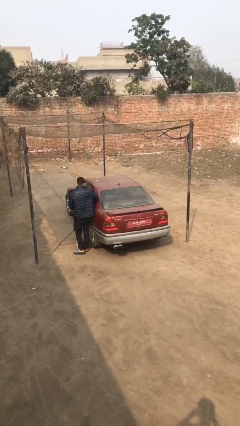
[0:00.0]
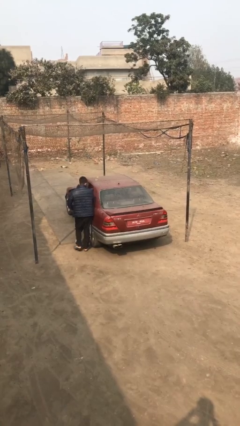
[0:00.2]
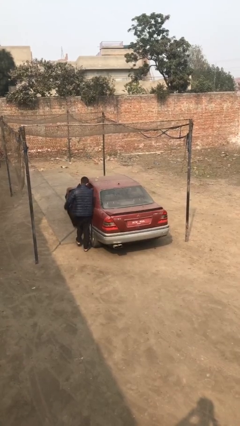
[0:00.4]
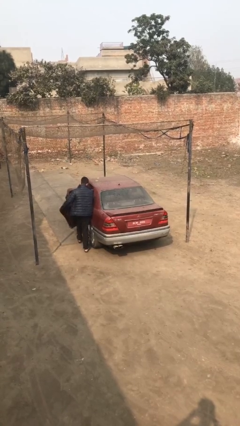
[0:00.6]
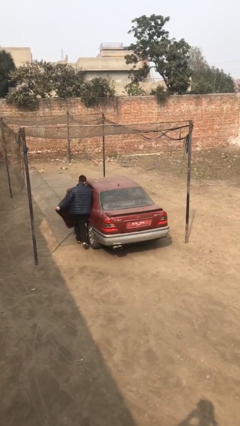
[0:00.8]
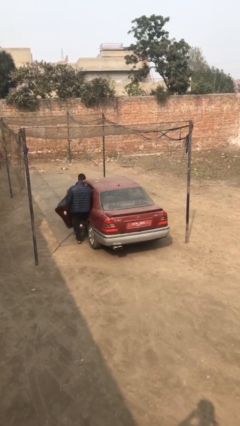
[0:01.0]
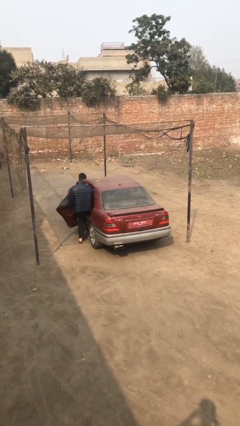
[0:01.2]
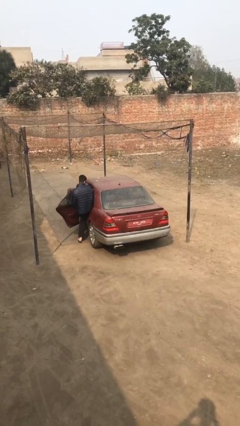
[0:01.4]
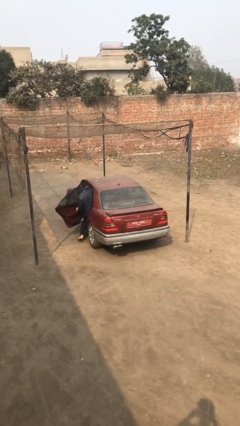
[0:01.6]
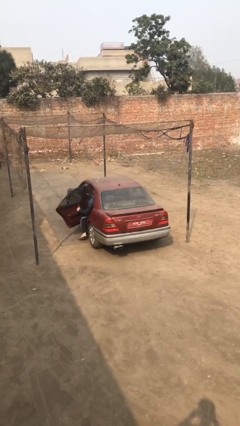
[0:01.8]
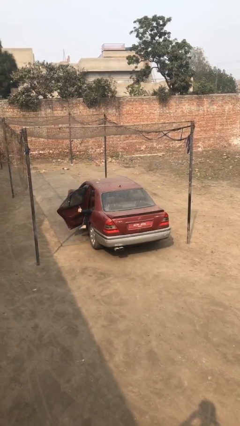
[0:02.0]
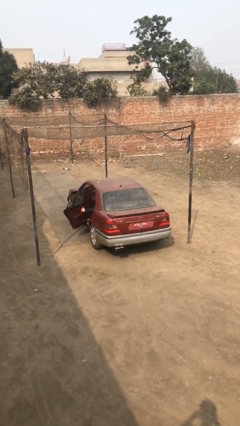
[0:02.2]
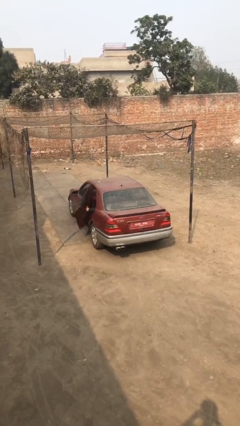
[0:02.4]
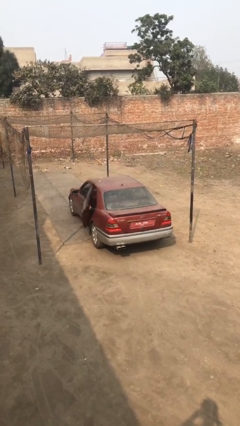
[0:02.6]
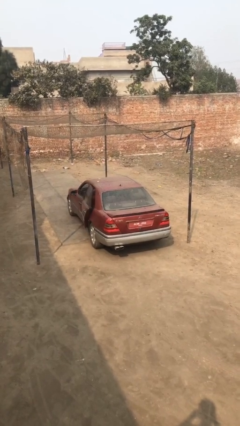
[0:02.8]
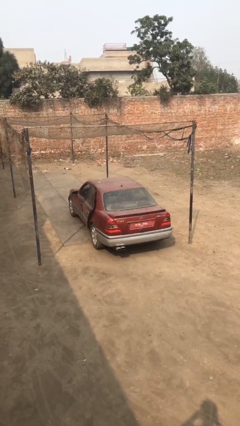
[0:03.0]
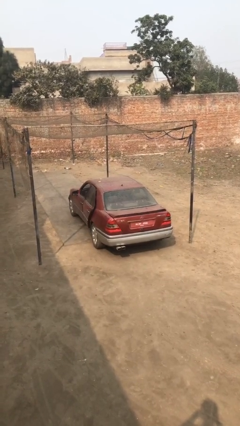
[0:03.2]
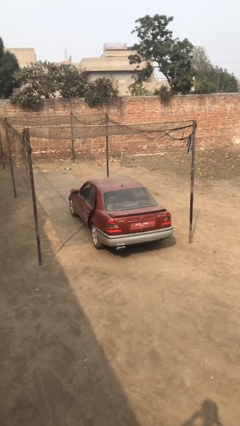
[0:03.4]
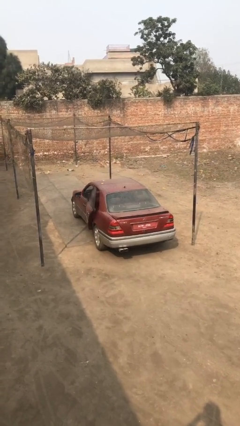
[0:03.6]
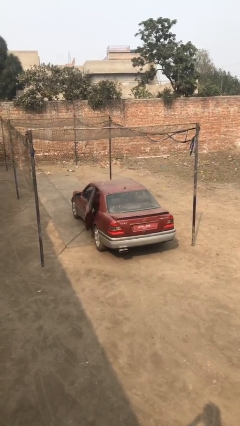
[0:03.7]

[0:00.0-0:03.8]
car picks up person

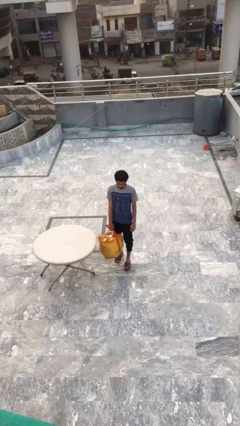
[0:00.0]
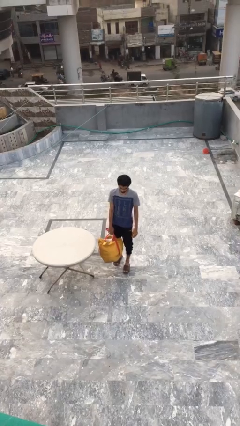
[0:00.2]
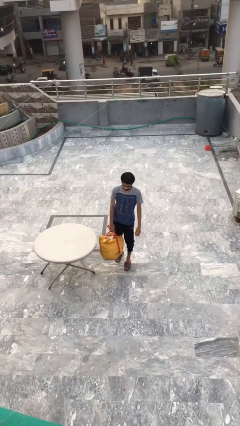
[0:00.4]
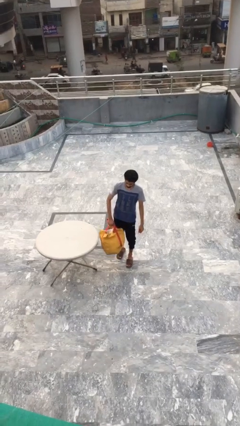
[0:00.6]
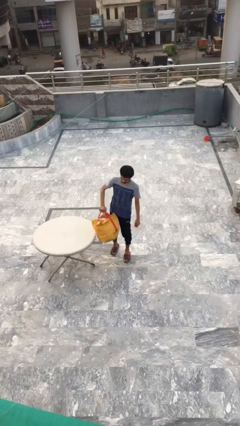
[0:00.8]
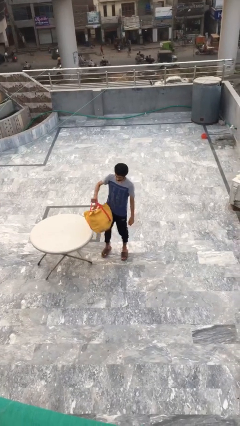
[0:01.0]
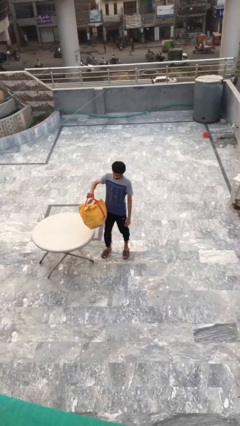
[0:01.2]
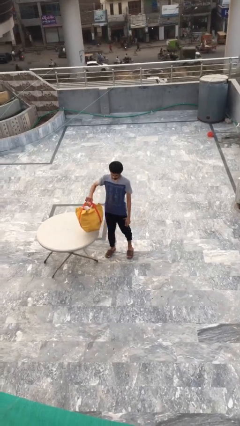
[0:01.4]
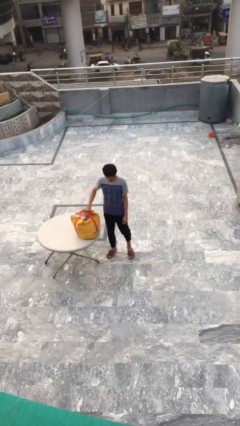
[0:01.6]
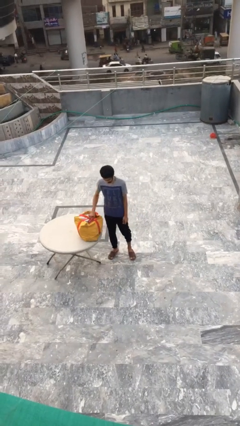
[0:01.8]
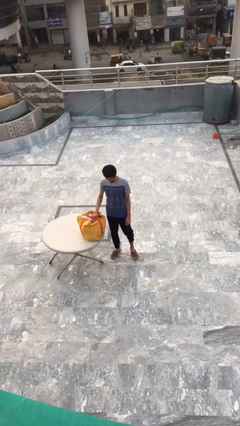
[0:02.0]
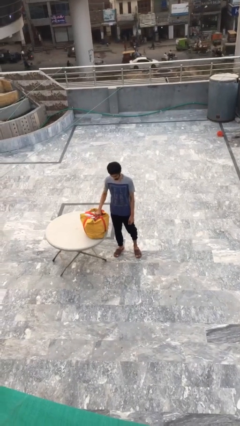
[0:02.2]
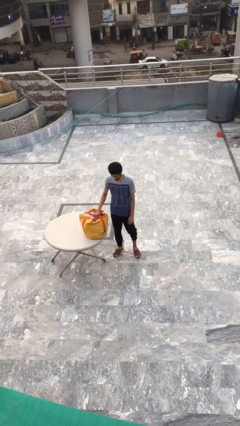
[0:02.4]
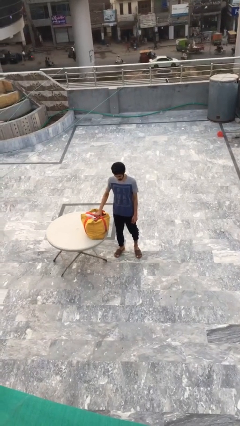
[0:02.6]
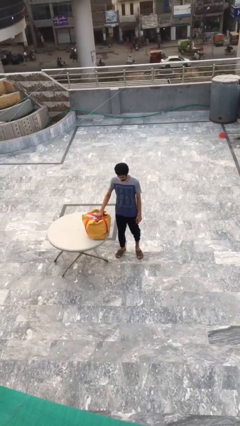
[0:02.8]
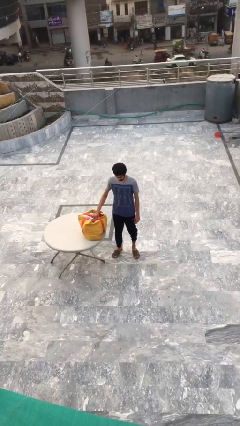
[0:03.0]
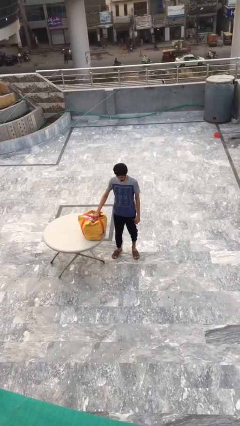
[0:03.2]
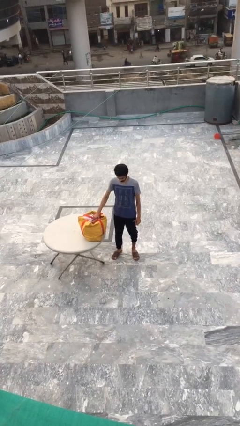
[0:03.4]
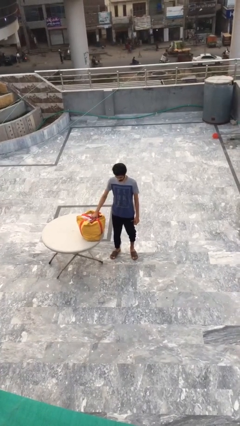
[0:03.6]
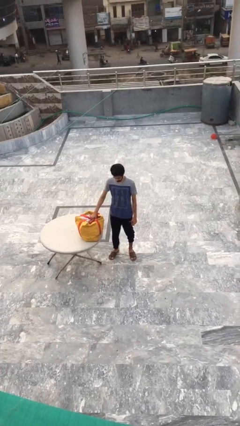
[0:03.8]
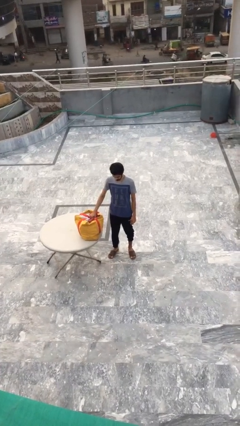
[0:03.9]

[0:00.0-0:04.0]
person puts down object on table

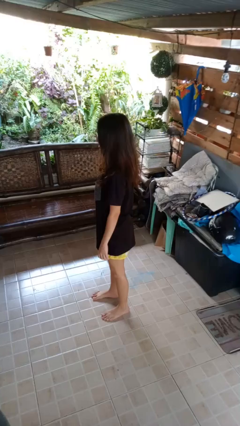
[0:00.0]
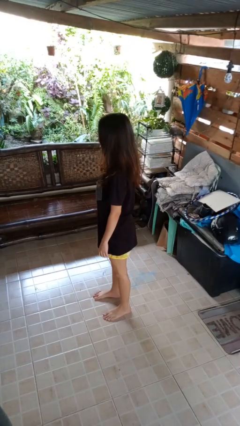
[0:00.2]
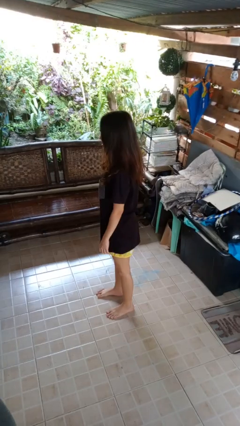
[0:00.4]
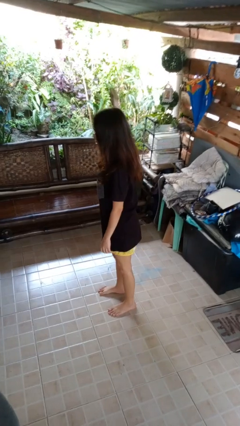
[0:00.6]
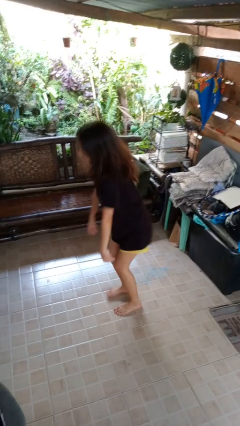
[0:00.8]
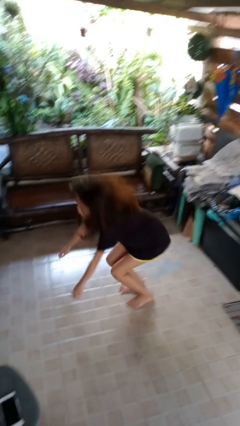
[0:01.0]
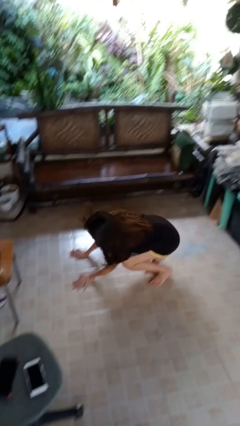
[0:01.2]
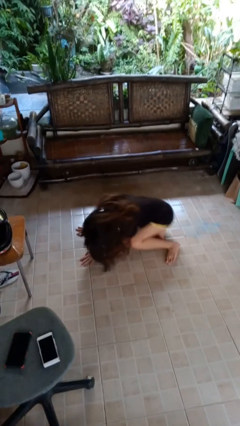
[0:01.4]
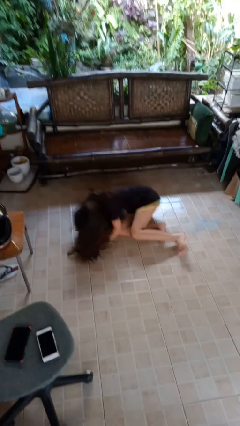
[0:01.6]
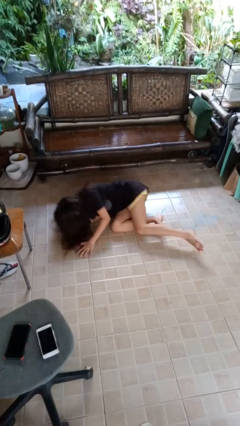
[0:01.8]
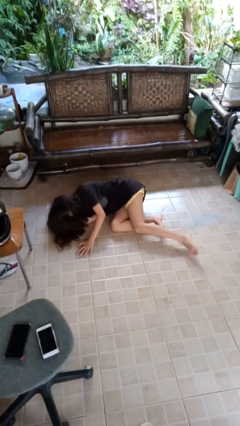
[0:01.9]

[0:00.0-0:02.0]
person falls while standing

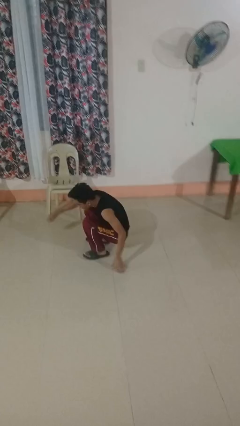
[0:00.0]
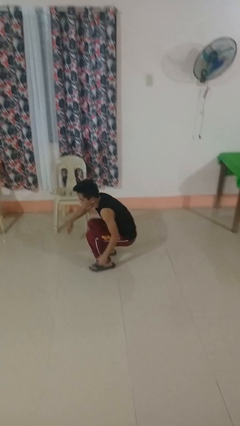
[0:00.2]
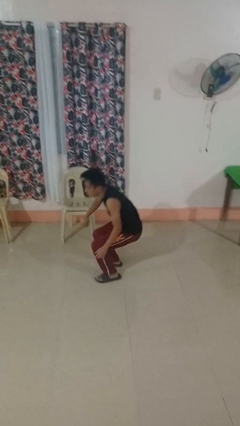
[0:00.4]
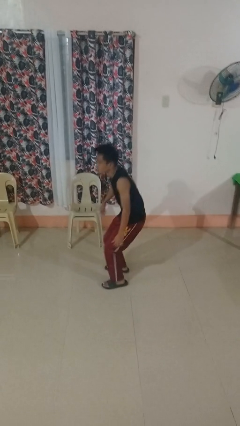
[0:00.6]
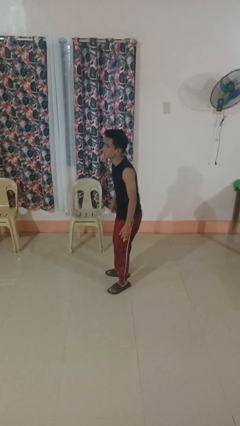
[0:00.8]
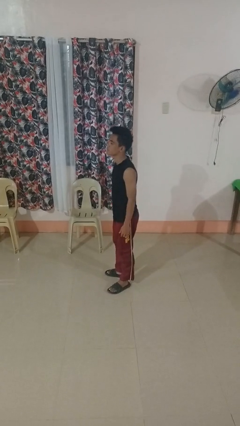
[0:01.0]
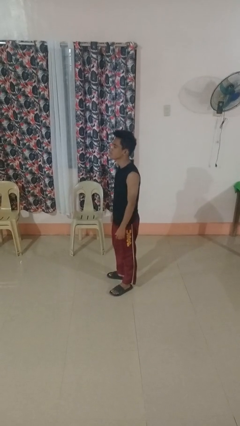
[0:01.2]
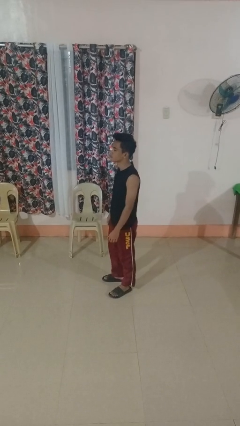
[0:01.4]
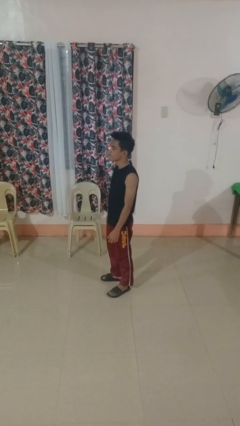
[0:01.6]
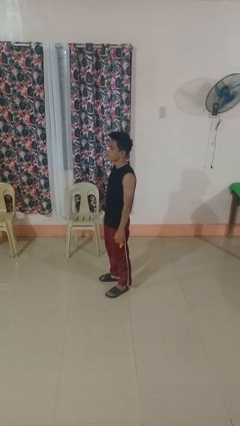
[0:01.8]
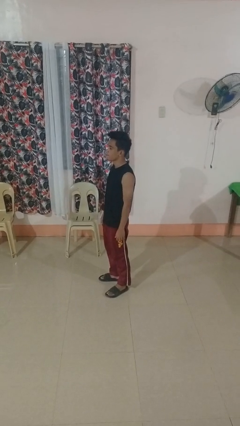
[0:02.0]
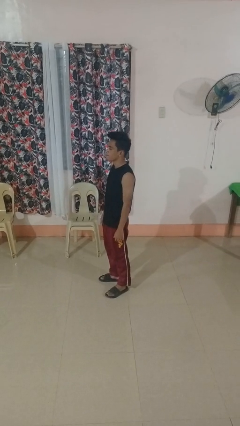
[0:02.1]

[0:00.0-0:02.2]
person stands up from floor

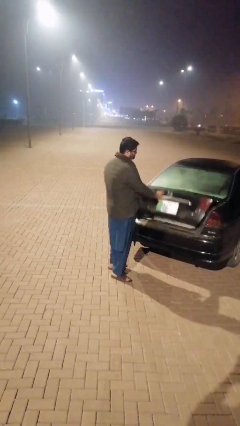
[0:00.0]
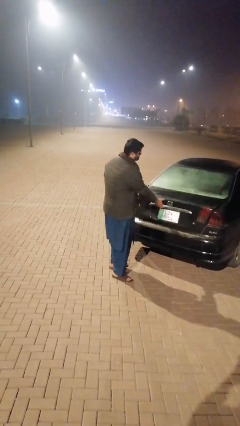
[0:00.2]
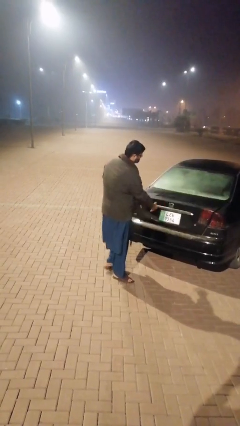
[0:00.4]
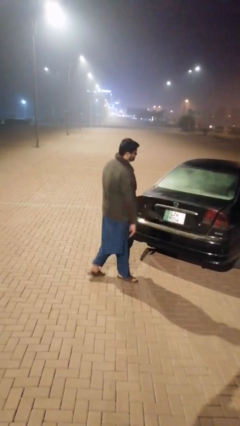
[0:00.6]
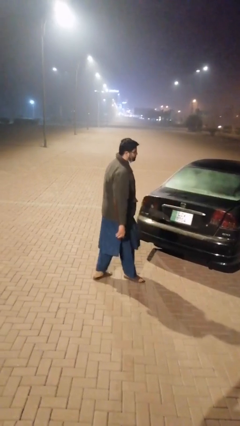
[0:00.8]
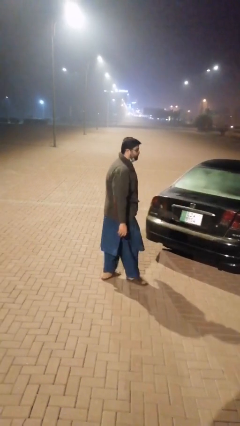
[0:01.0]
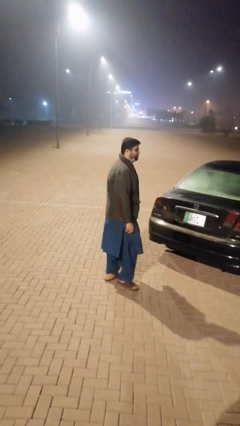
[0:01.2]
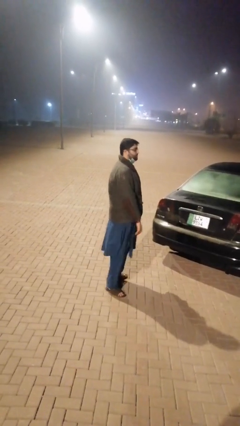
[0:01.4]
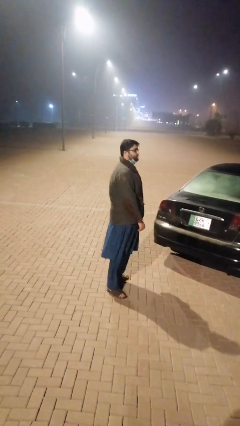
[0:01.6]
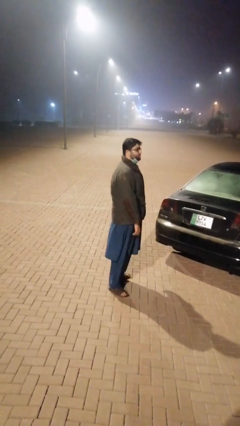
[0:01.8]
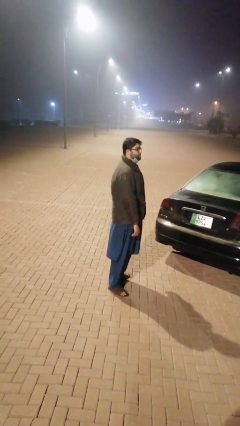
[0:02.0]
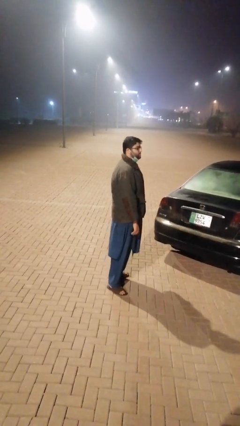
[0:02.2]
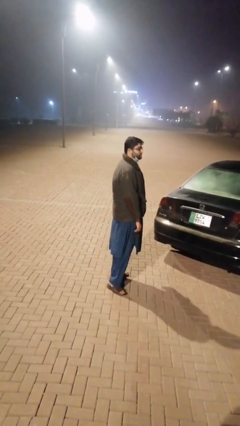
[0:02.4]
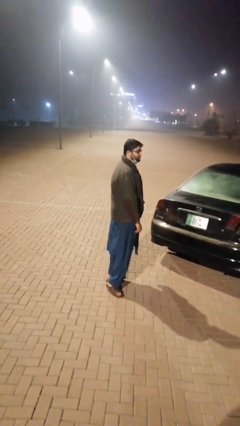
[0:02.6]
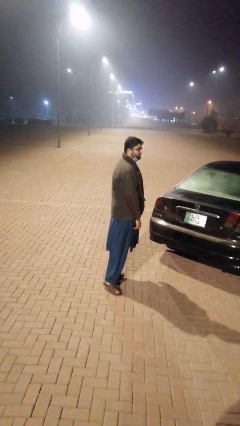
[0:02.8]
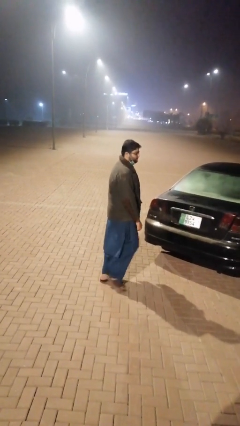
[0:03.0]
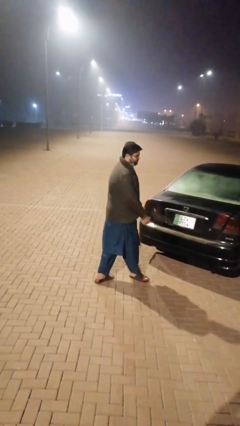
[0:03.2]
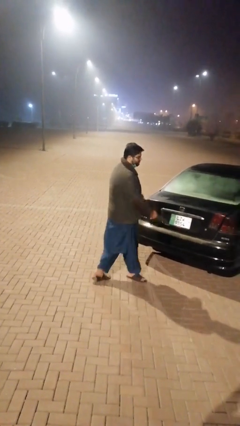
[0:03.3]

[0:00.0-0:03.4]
person closes car trunk

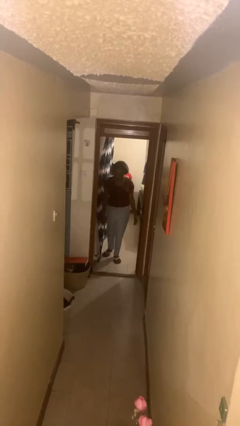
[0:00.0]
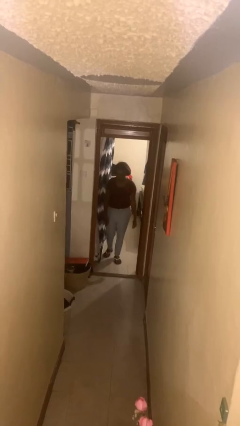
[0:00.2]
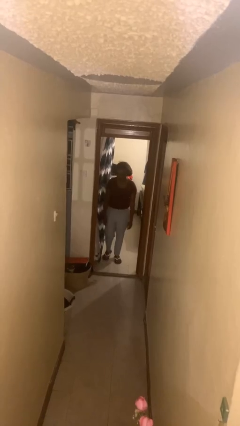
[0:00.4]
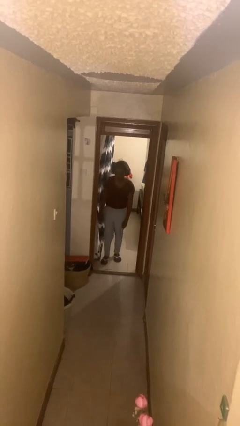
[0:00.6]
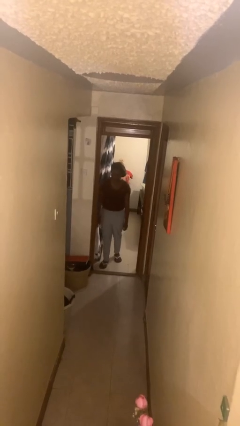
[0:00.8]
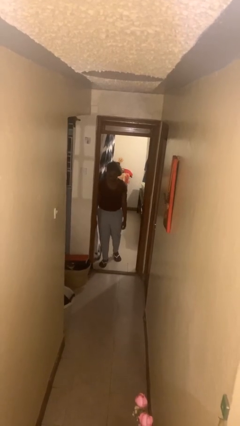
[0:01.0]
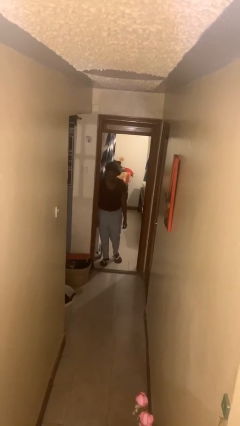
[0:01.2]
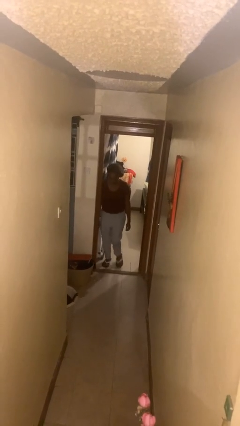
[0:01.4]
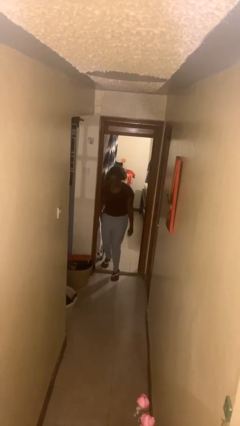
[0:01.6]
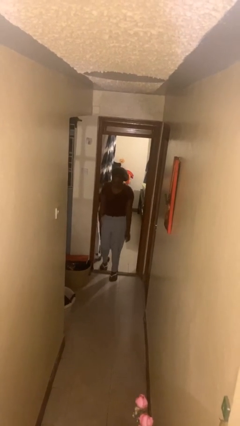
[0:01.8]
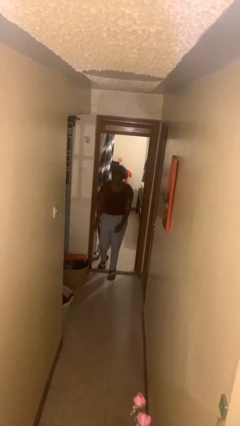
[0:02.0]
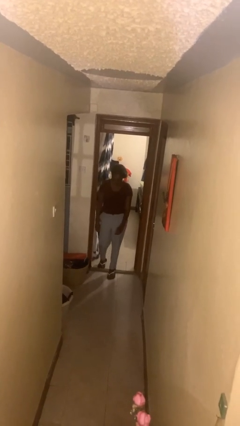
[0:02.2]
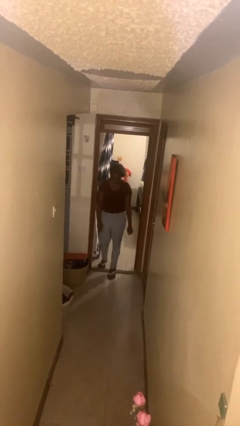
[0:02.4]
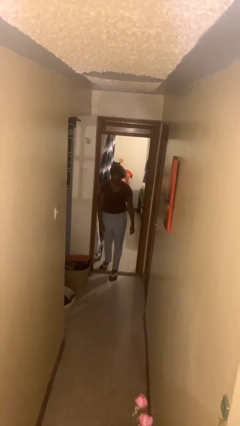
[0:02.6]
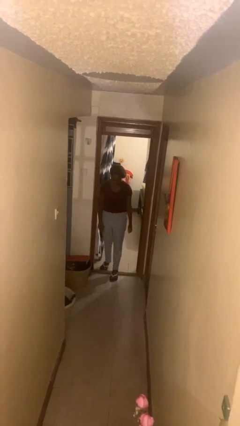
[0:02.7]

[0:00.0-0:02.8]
person bumps into wall
